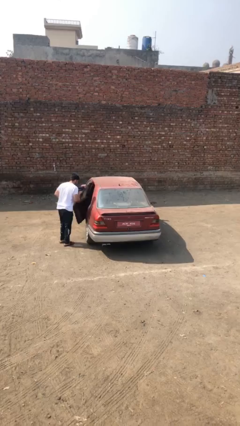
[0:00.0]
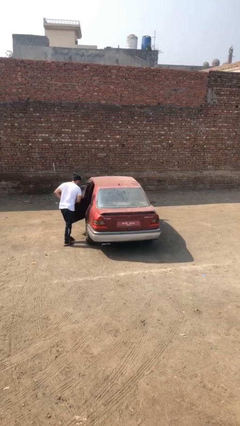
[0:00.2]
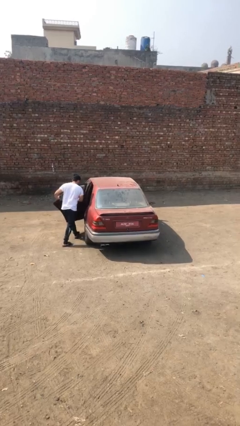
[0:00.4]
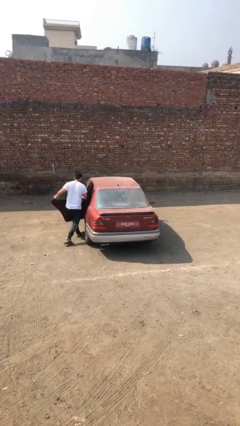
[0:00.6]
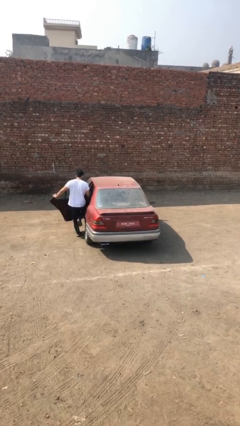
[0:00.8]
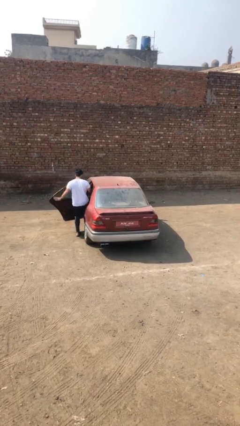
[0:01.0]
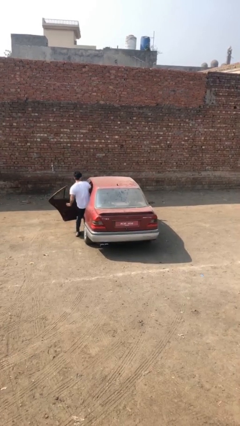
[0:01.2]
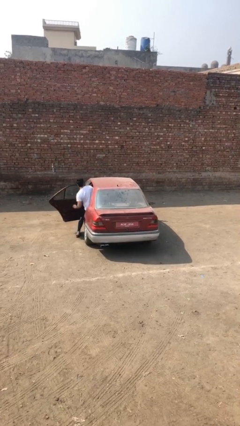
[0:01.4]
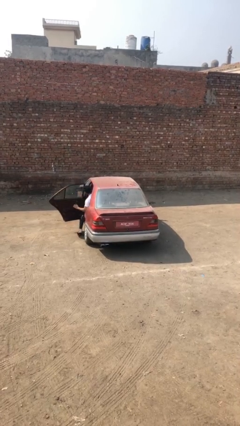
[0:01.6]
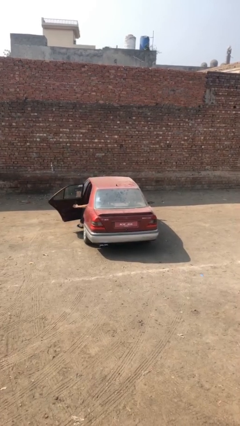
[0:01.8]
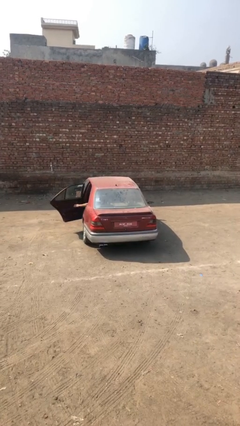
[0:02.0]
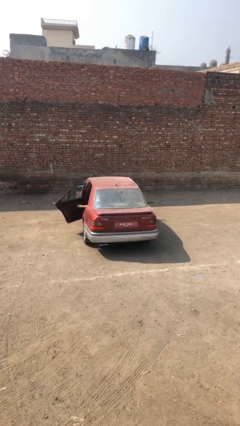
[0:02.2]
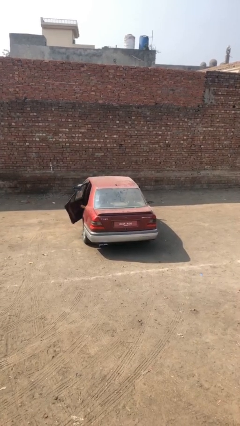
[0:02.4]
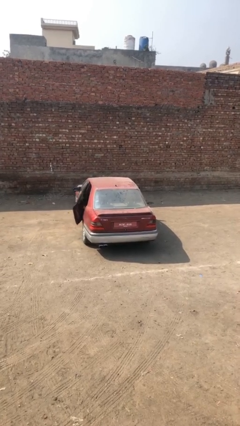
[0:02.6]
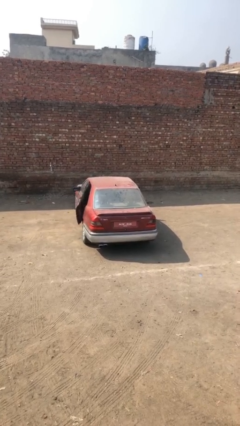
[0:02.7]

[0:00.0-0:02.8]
car picks up person

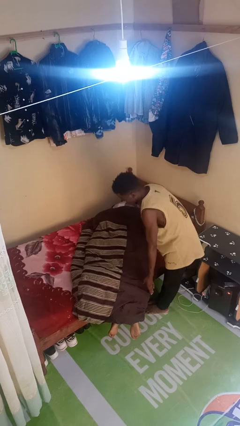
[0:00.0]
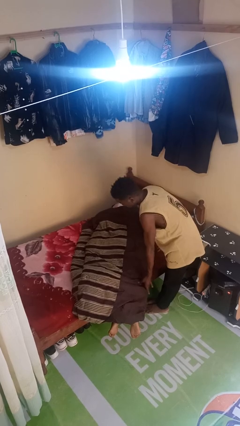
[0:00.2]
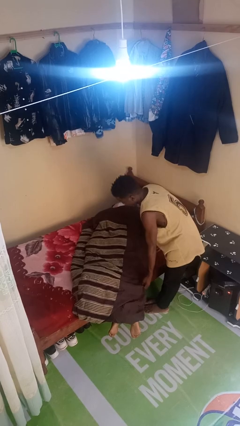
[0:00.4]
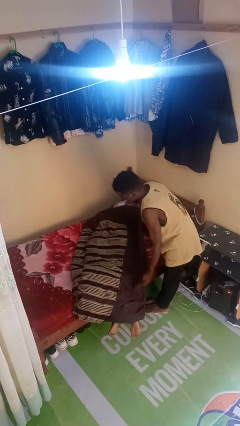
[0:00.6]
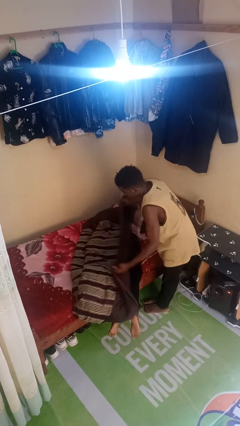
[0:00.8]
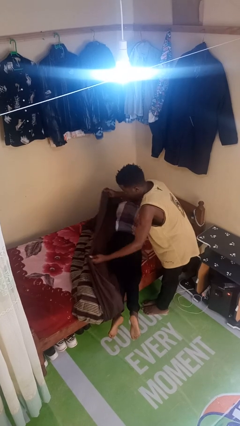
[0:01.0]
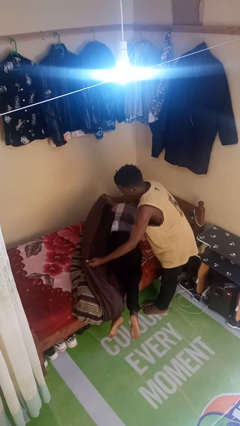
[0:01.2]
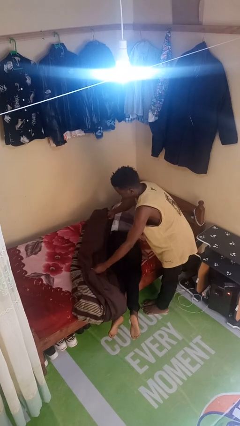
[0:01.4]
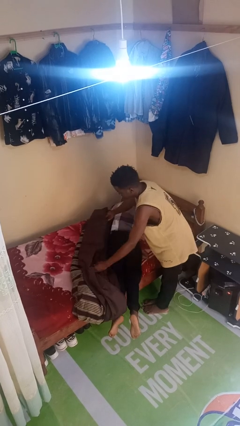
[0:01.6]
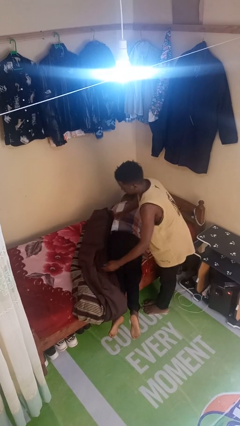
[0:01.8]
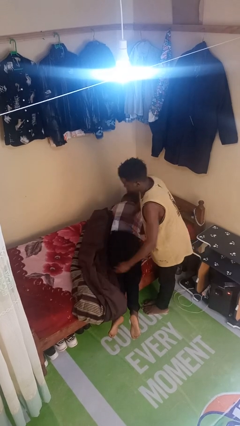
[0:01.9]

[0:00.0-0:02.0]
person uncovers friend with blanket

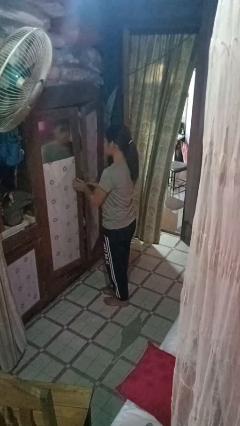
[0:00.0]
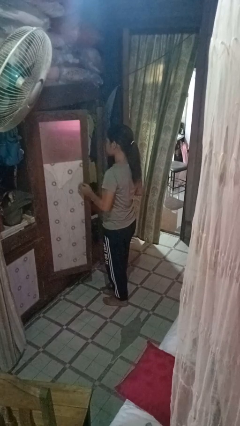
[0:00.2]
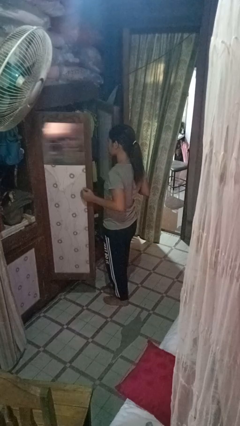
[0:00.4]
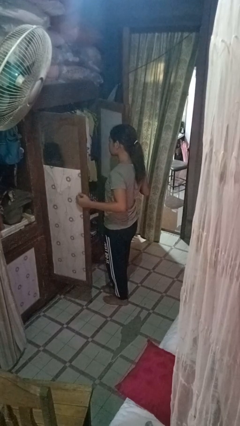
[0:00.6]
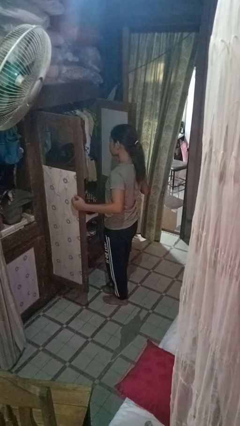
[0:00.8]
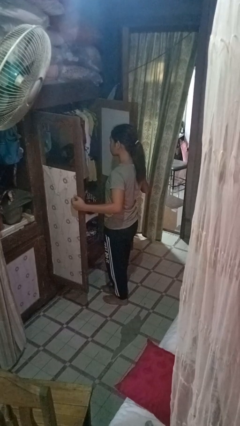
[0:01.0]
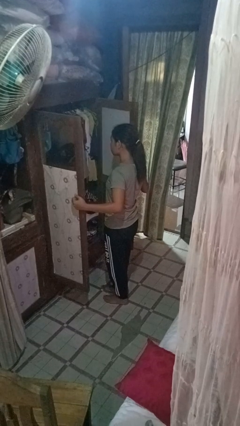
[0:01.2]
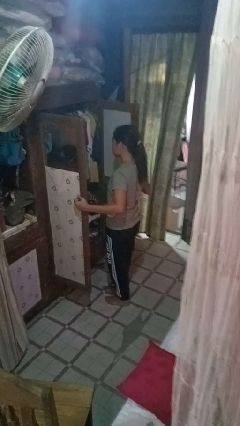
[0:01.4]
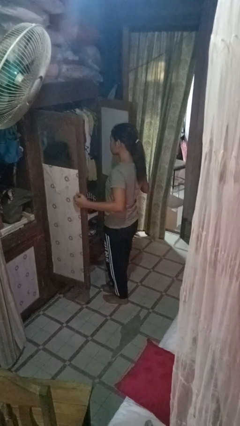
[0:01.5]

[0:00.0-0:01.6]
person opens closet door

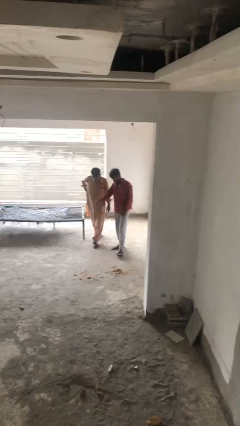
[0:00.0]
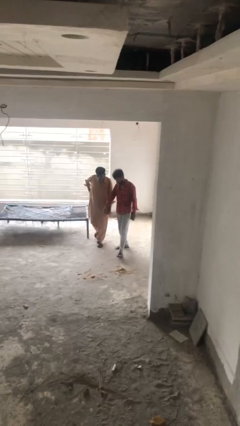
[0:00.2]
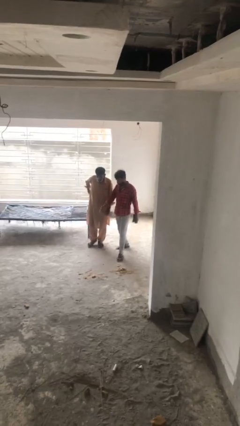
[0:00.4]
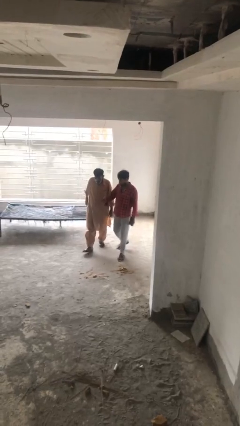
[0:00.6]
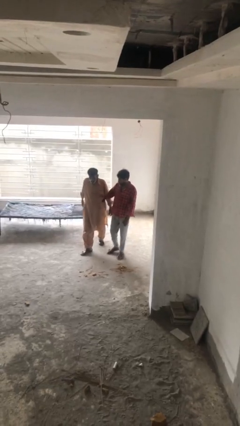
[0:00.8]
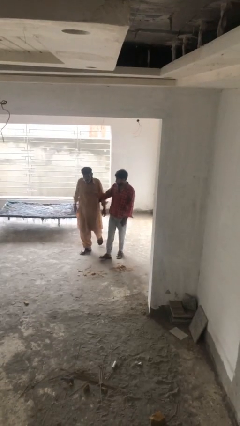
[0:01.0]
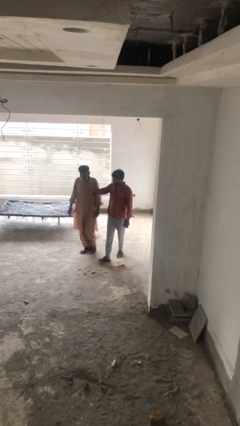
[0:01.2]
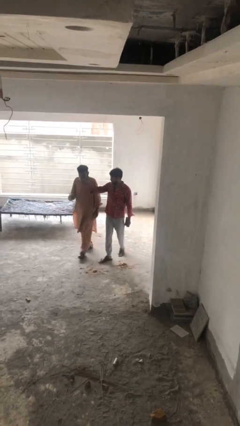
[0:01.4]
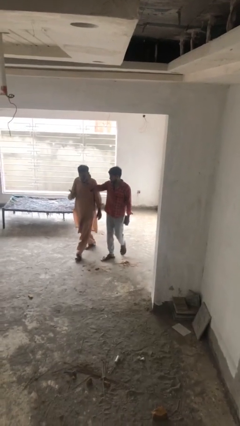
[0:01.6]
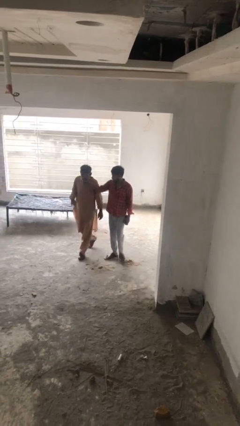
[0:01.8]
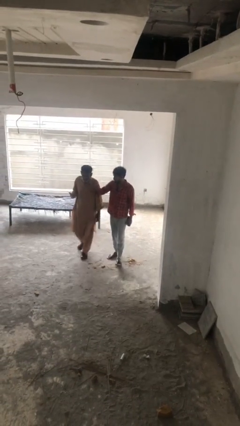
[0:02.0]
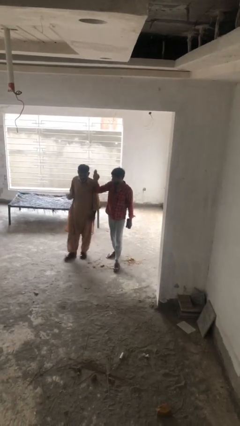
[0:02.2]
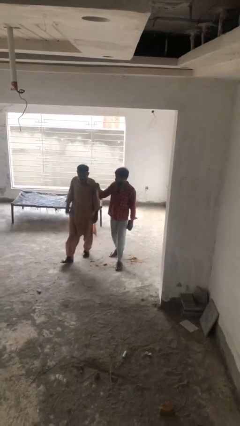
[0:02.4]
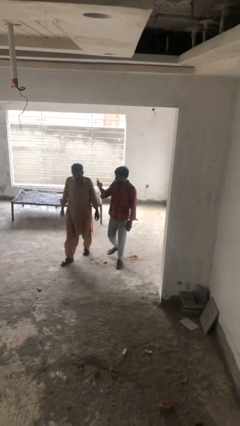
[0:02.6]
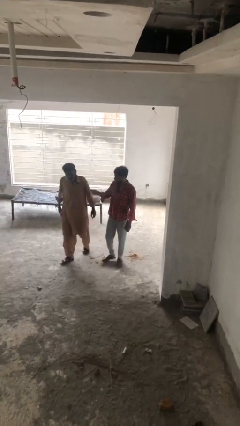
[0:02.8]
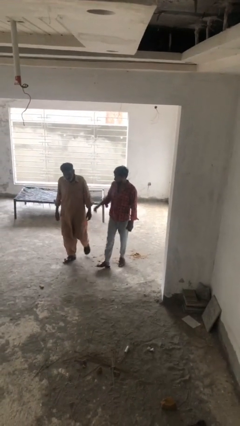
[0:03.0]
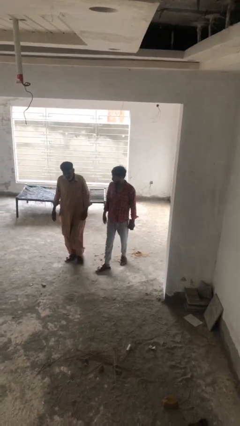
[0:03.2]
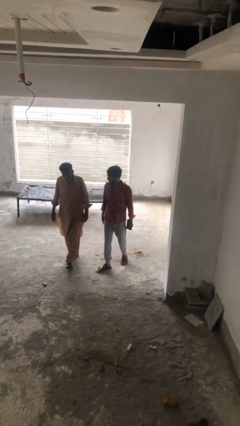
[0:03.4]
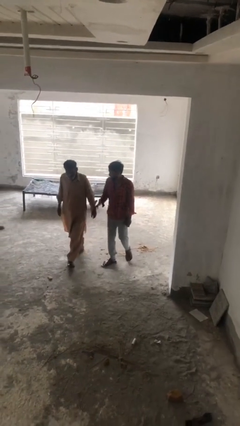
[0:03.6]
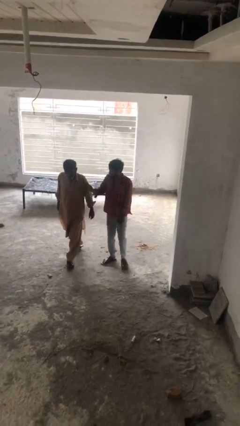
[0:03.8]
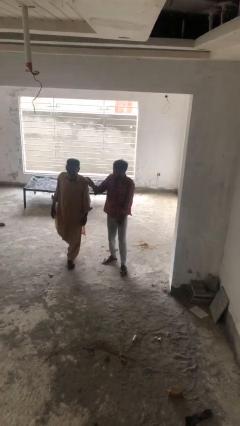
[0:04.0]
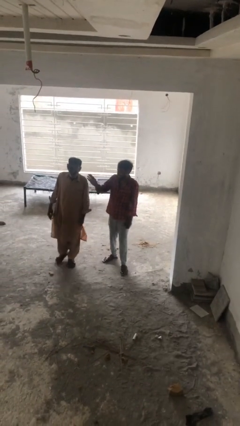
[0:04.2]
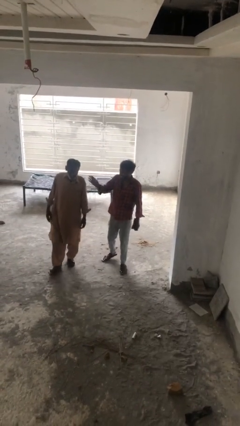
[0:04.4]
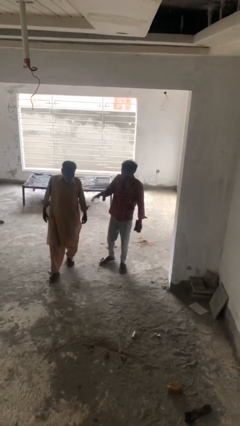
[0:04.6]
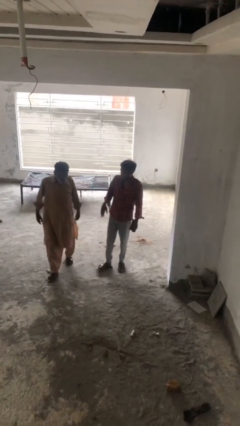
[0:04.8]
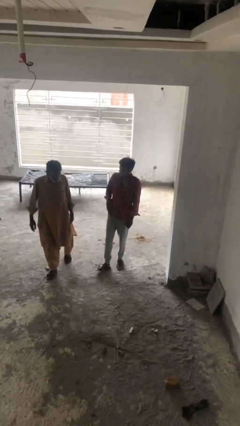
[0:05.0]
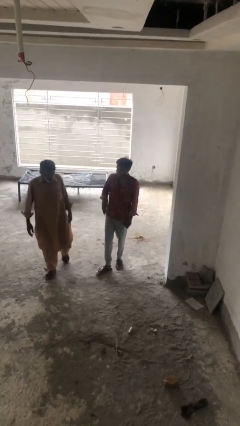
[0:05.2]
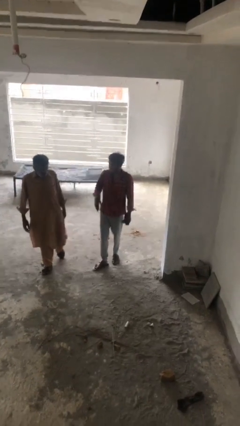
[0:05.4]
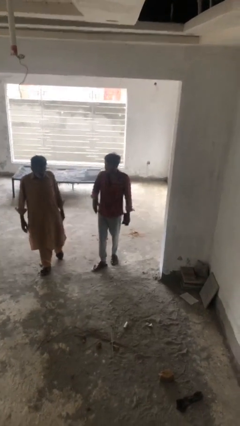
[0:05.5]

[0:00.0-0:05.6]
person talks to person

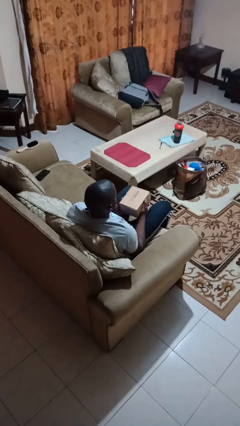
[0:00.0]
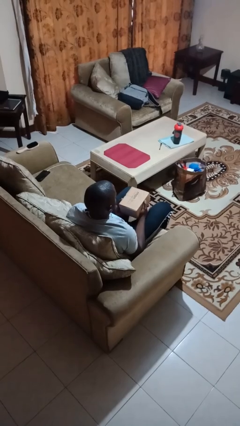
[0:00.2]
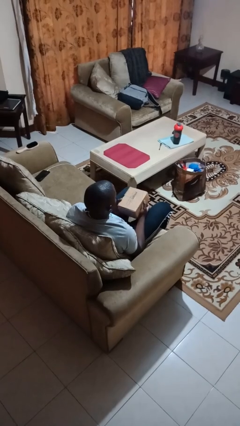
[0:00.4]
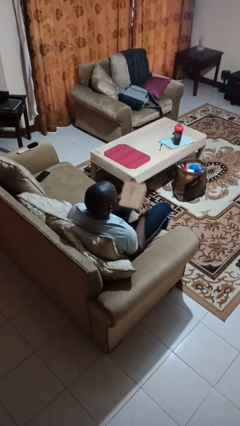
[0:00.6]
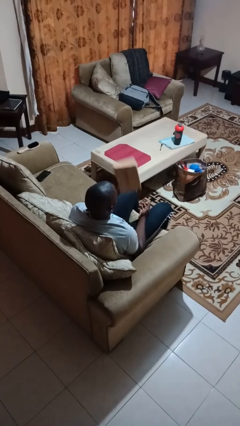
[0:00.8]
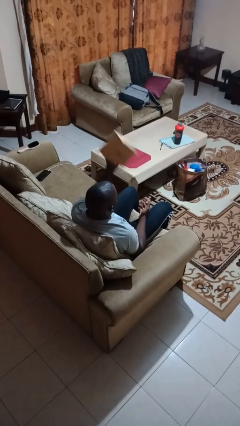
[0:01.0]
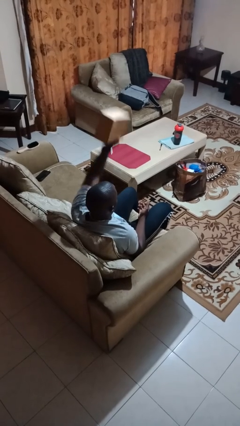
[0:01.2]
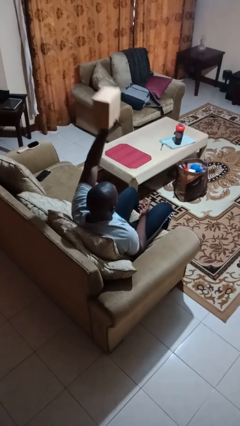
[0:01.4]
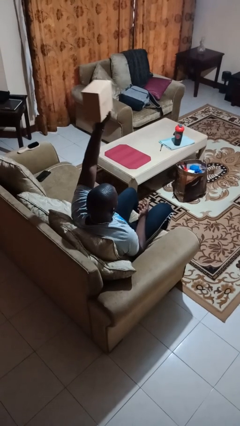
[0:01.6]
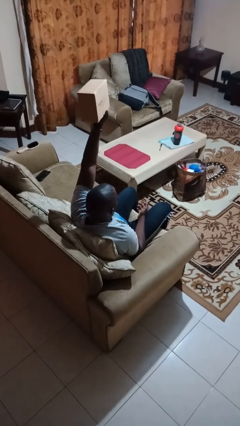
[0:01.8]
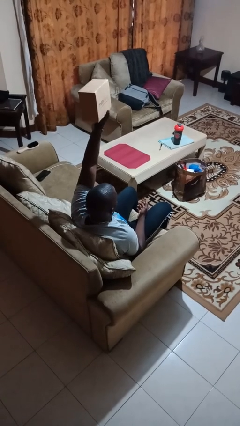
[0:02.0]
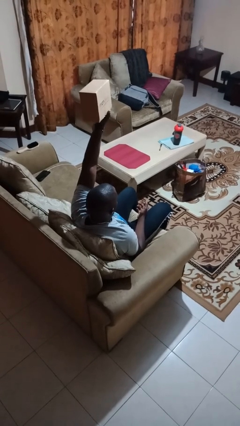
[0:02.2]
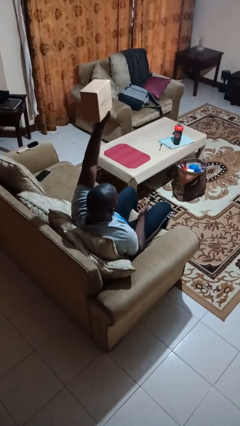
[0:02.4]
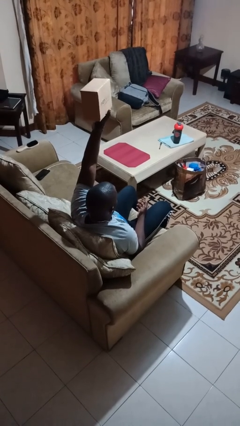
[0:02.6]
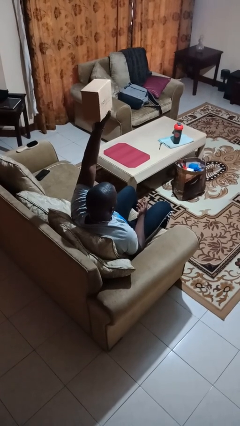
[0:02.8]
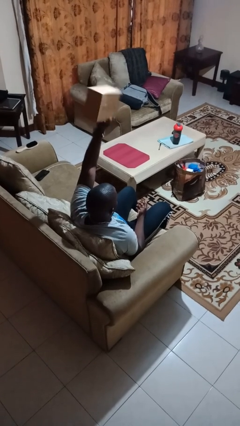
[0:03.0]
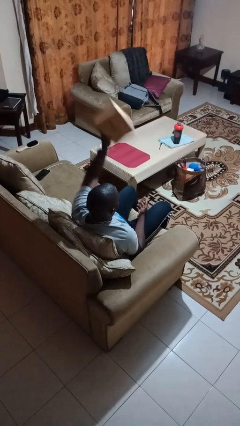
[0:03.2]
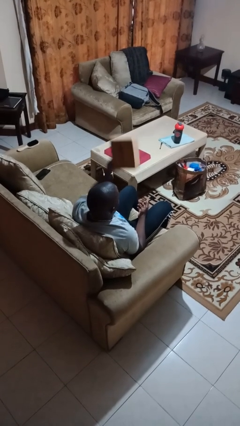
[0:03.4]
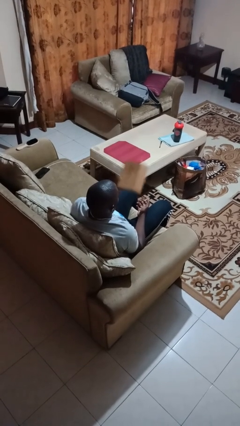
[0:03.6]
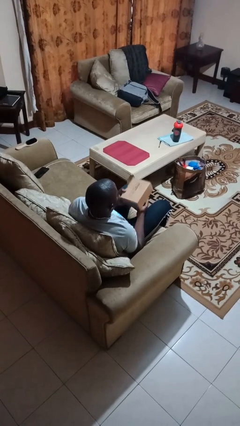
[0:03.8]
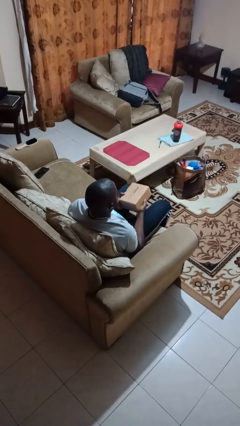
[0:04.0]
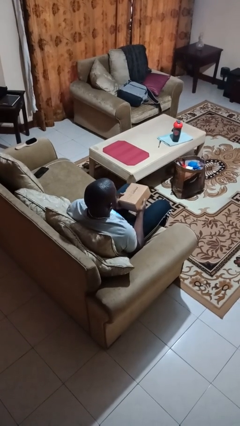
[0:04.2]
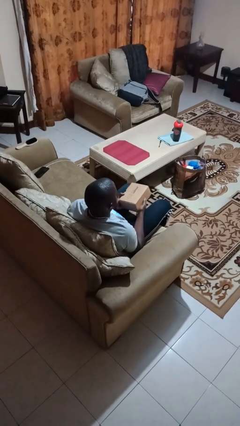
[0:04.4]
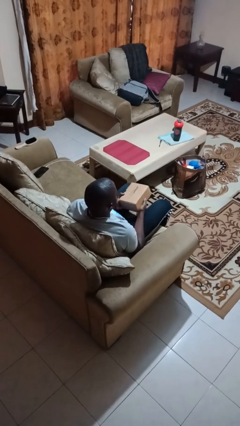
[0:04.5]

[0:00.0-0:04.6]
person holds object above head

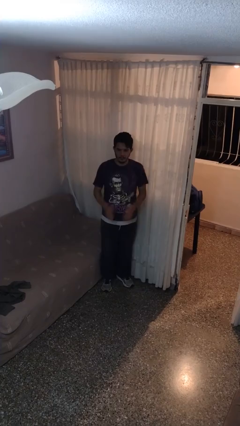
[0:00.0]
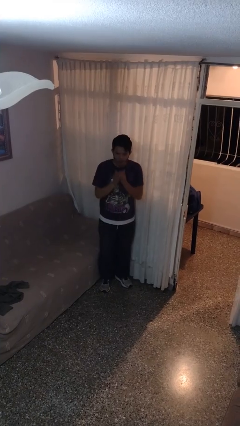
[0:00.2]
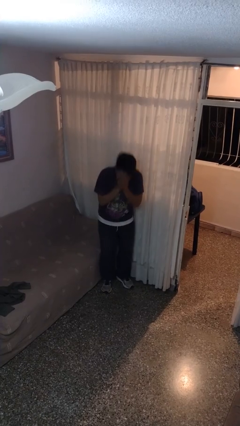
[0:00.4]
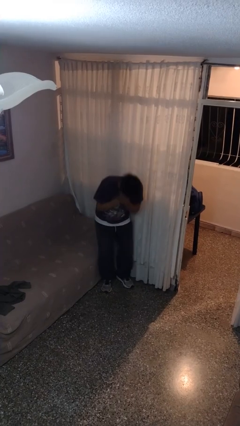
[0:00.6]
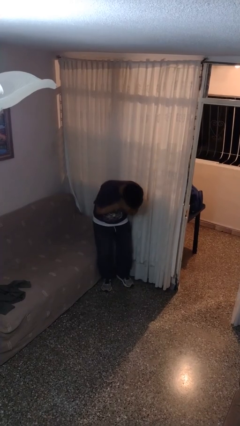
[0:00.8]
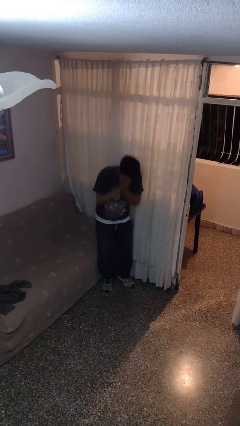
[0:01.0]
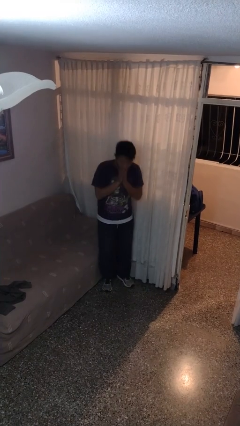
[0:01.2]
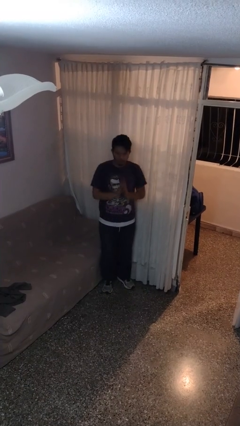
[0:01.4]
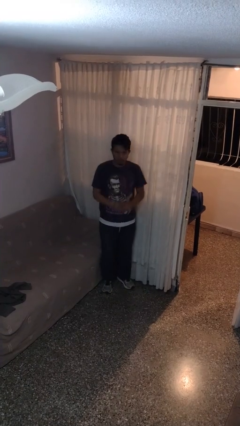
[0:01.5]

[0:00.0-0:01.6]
person sneezes into hand
